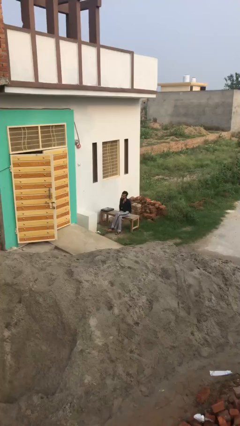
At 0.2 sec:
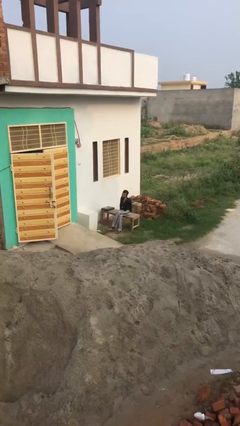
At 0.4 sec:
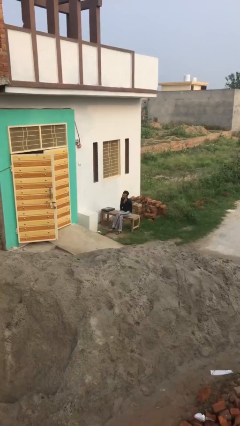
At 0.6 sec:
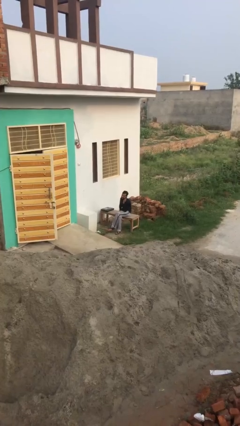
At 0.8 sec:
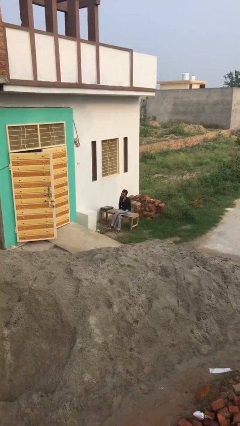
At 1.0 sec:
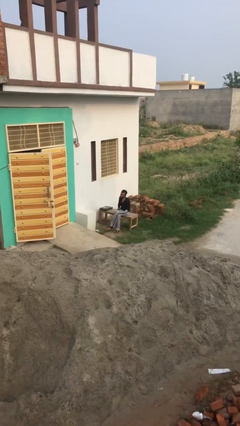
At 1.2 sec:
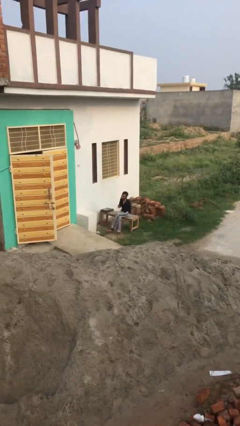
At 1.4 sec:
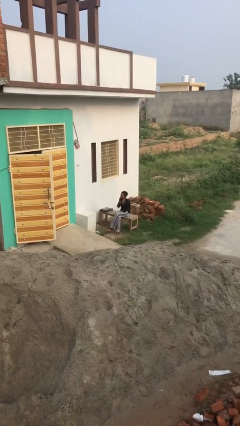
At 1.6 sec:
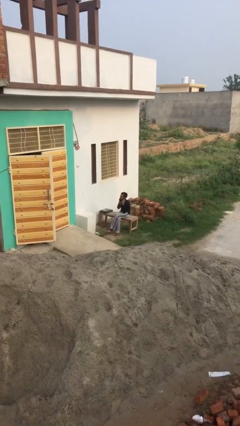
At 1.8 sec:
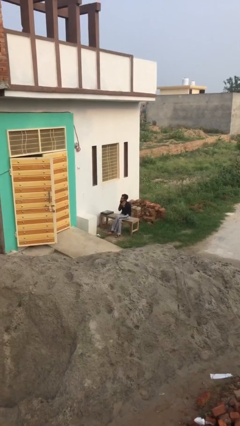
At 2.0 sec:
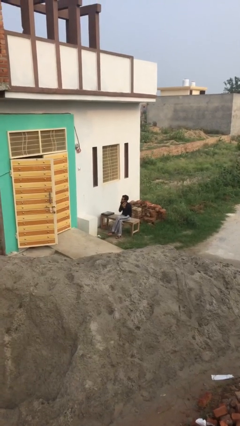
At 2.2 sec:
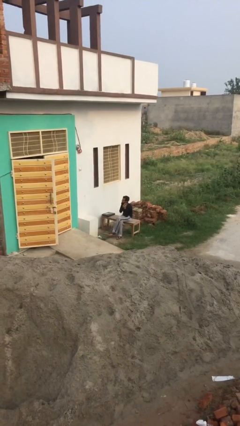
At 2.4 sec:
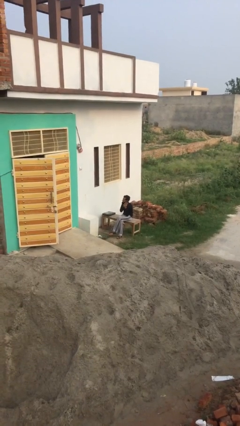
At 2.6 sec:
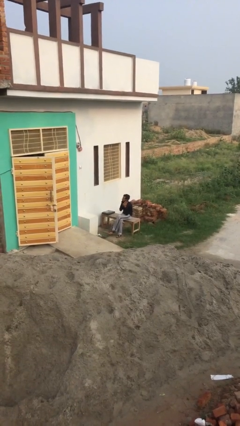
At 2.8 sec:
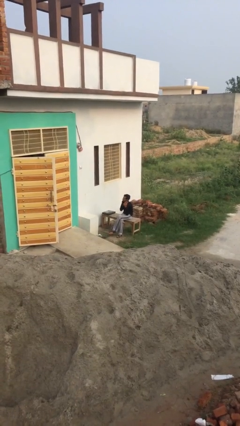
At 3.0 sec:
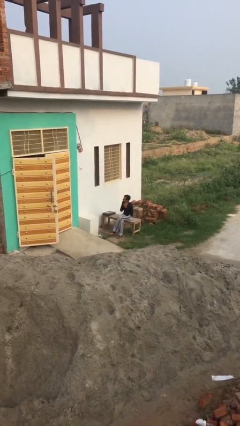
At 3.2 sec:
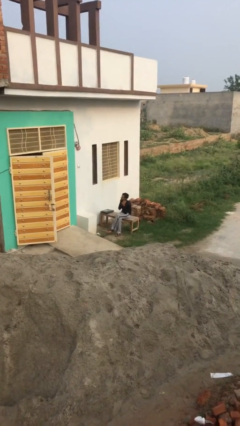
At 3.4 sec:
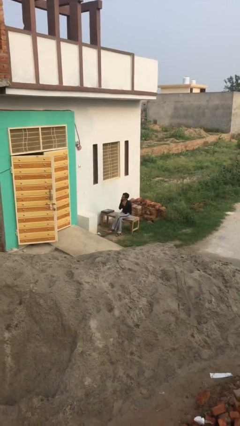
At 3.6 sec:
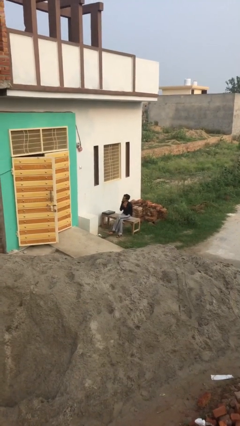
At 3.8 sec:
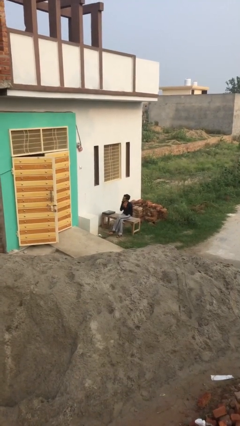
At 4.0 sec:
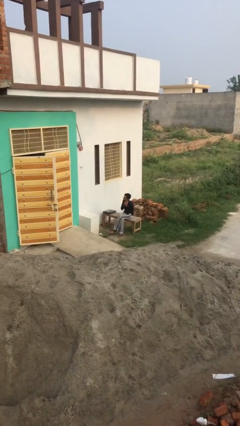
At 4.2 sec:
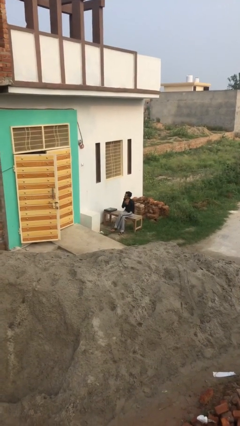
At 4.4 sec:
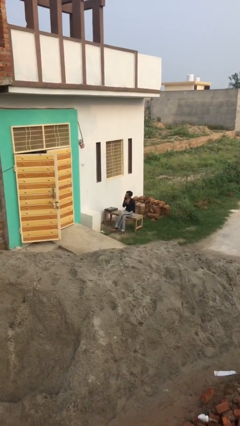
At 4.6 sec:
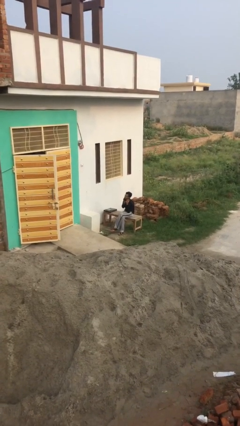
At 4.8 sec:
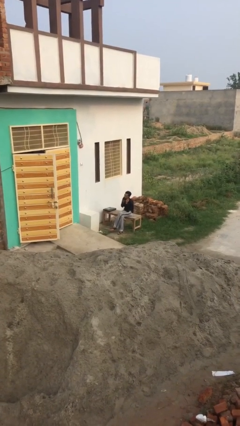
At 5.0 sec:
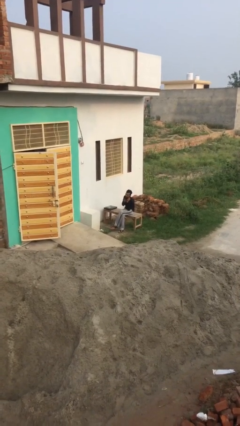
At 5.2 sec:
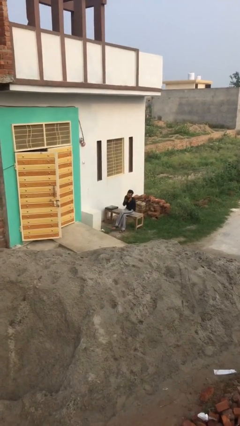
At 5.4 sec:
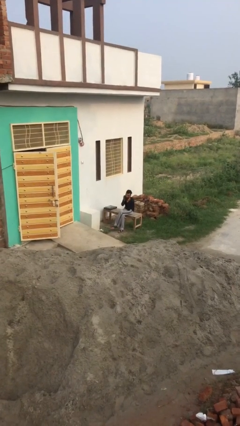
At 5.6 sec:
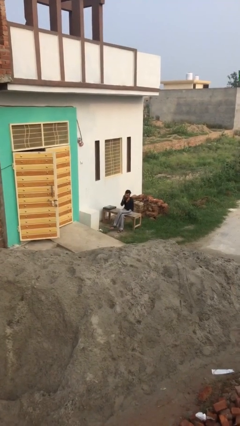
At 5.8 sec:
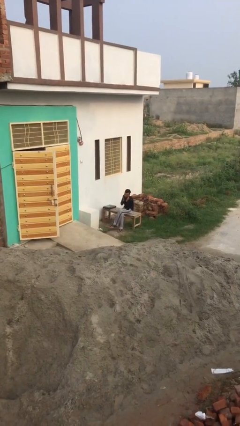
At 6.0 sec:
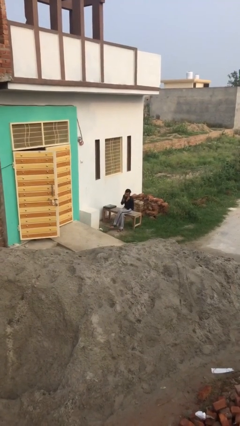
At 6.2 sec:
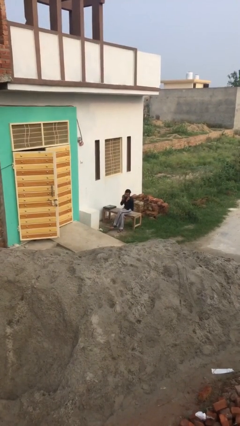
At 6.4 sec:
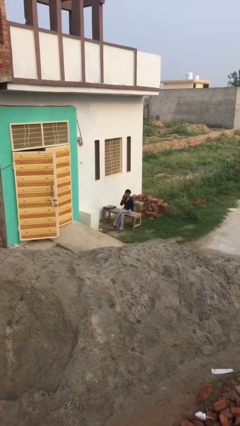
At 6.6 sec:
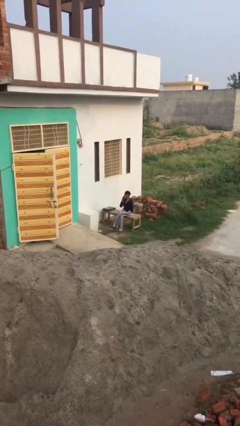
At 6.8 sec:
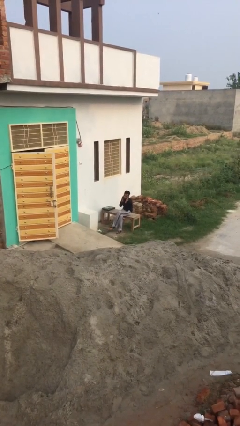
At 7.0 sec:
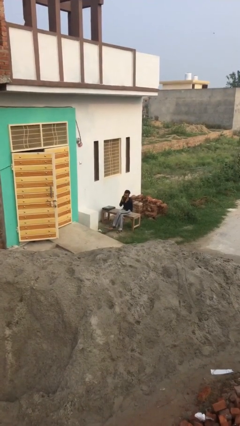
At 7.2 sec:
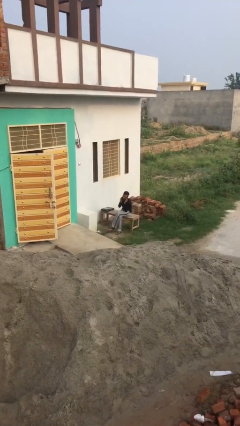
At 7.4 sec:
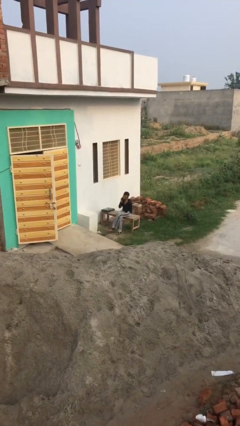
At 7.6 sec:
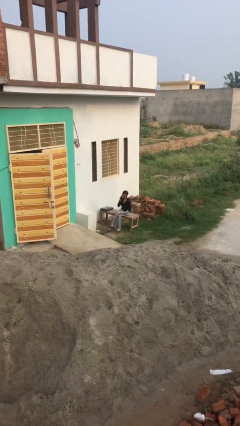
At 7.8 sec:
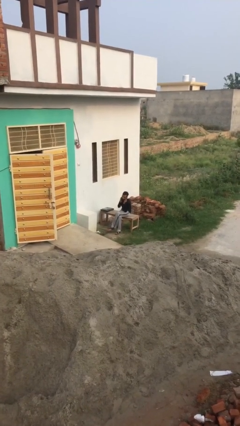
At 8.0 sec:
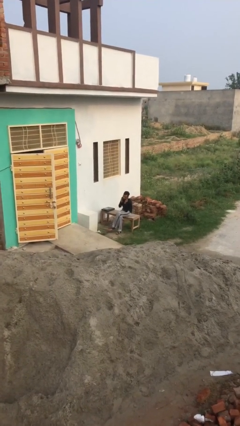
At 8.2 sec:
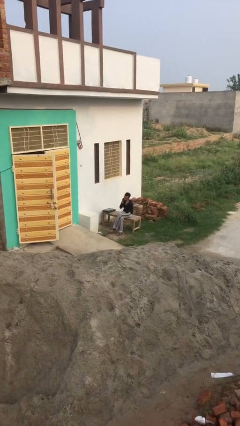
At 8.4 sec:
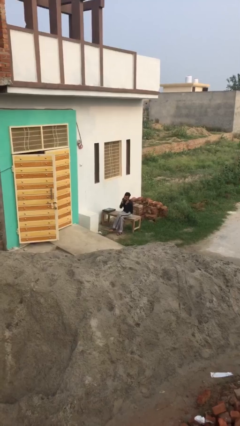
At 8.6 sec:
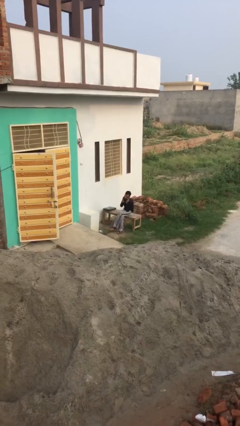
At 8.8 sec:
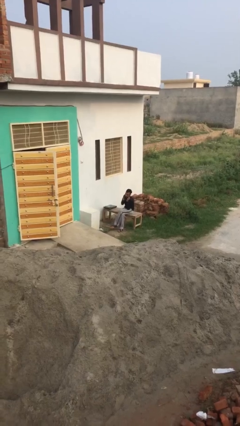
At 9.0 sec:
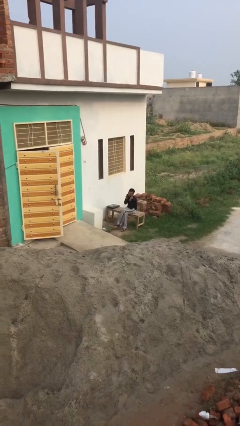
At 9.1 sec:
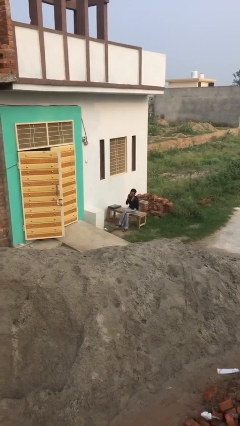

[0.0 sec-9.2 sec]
person talks on phone

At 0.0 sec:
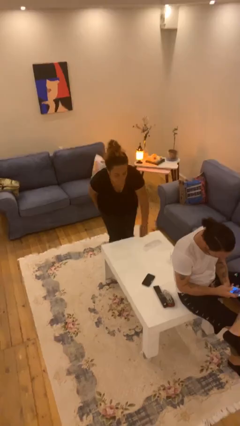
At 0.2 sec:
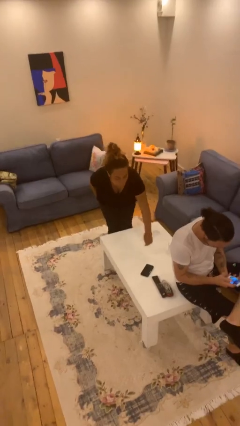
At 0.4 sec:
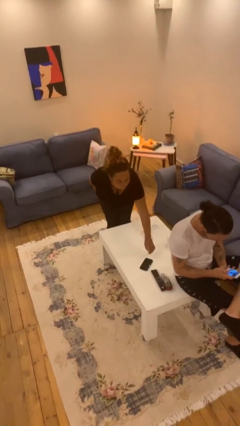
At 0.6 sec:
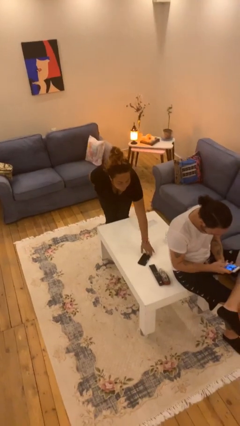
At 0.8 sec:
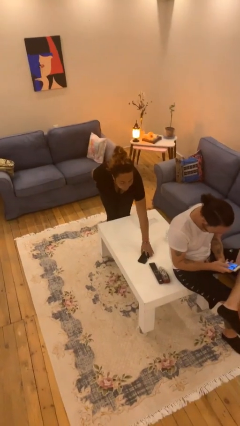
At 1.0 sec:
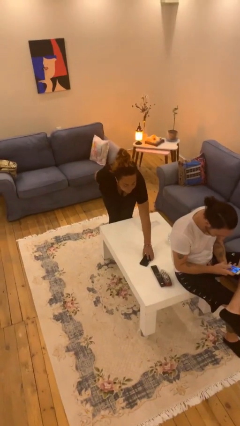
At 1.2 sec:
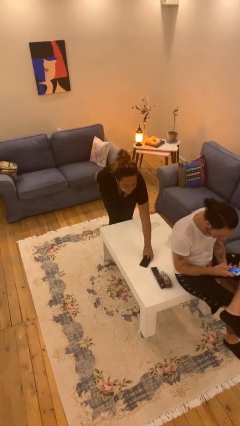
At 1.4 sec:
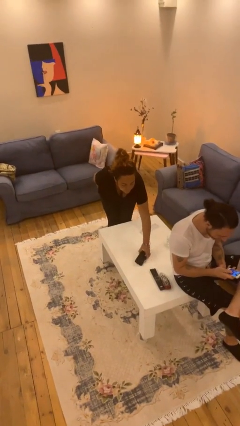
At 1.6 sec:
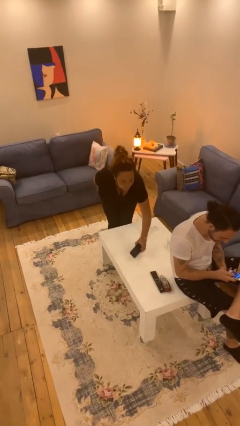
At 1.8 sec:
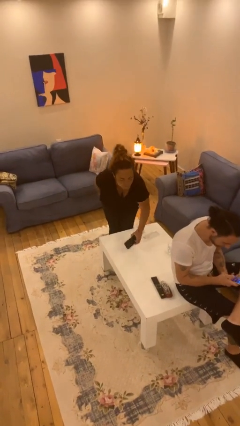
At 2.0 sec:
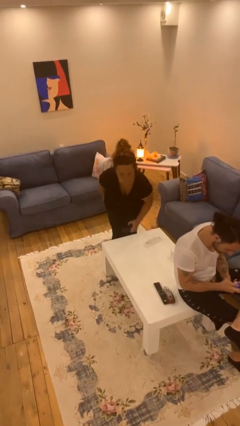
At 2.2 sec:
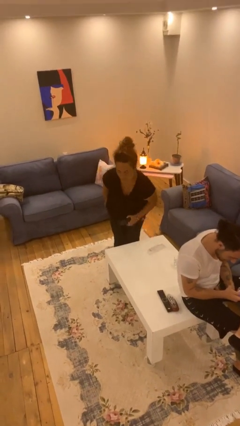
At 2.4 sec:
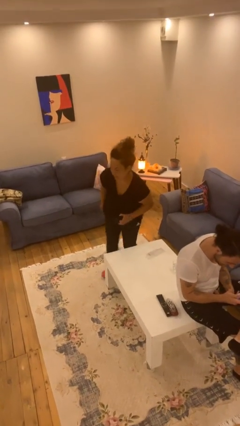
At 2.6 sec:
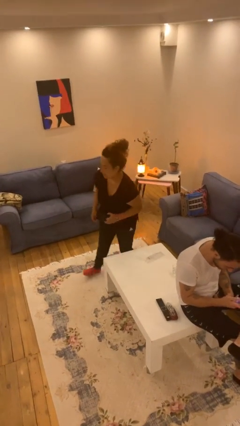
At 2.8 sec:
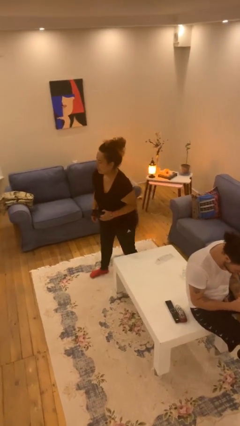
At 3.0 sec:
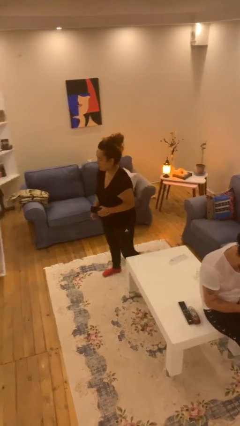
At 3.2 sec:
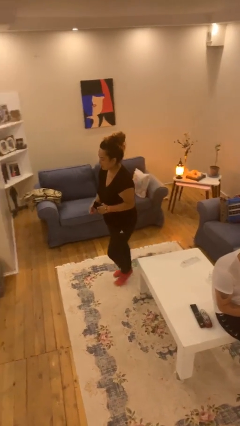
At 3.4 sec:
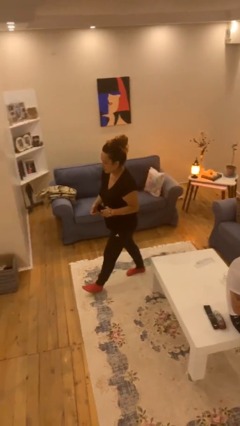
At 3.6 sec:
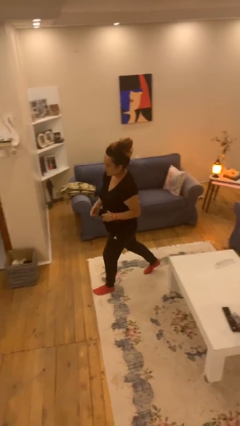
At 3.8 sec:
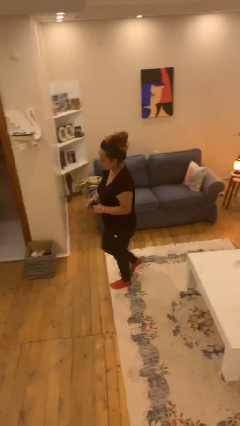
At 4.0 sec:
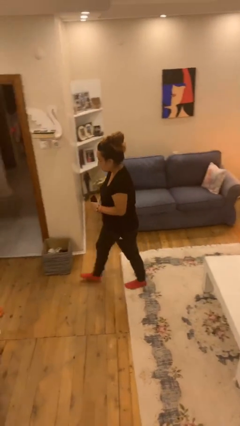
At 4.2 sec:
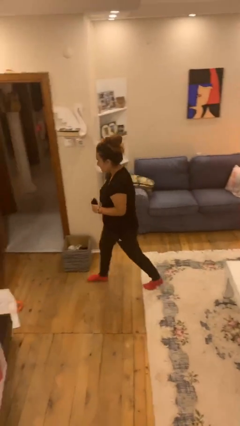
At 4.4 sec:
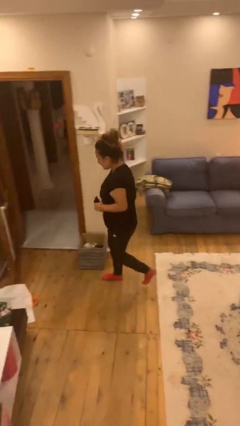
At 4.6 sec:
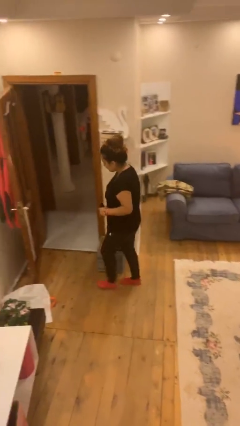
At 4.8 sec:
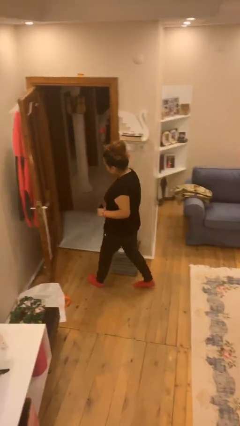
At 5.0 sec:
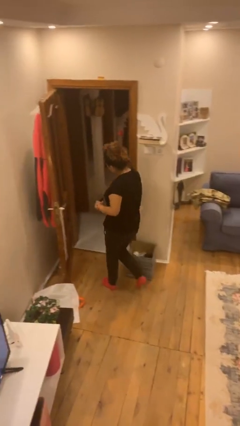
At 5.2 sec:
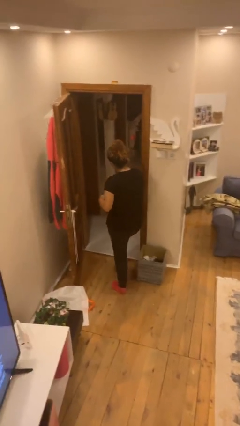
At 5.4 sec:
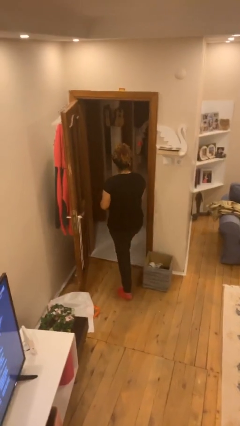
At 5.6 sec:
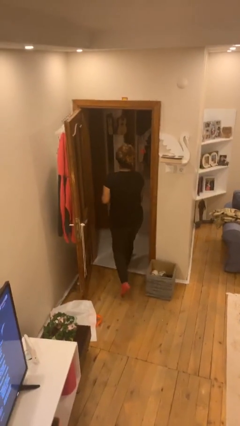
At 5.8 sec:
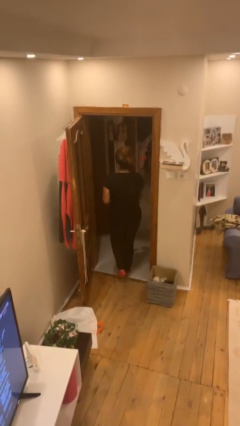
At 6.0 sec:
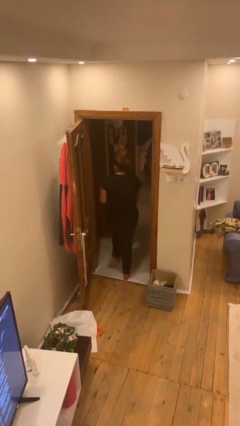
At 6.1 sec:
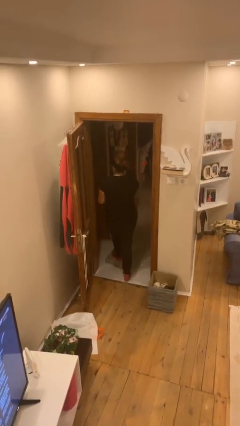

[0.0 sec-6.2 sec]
person steals object from person

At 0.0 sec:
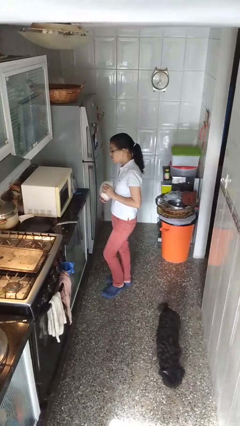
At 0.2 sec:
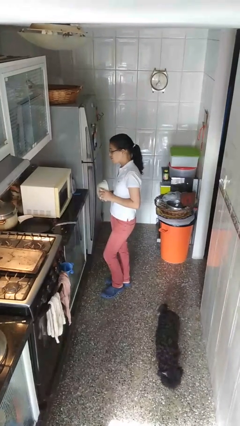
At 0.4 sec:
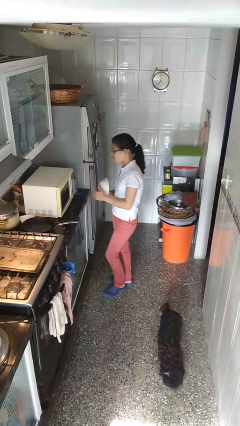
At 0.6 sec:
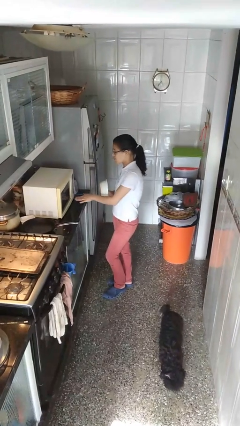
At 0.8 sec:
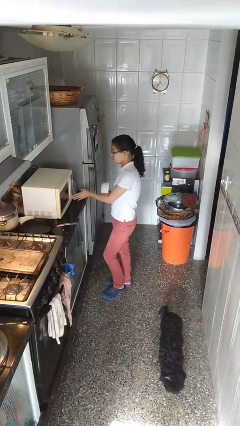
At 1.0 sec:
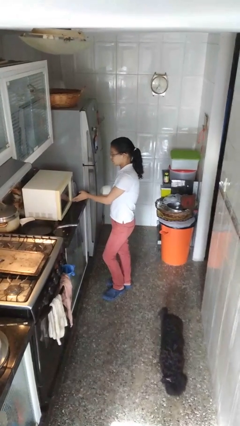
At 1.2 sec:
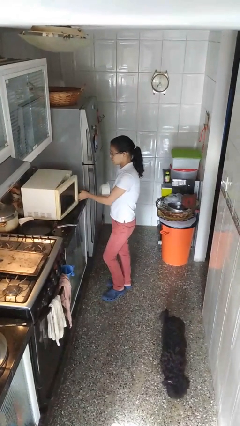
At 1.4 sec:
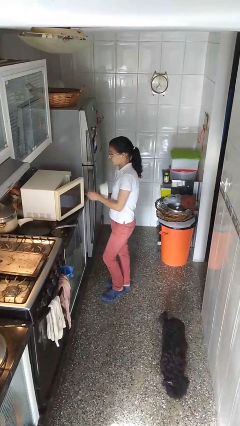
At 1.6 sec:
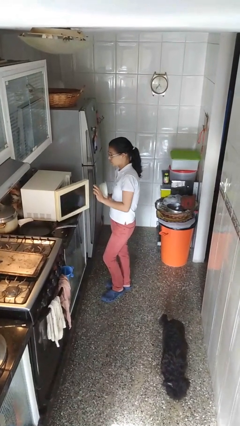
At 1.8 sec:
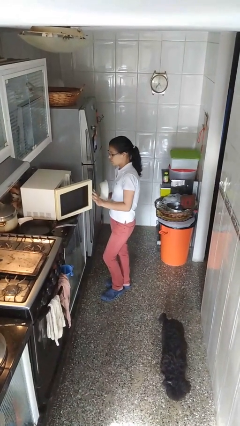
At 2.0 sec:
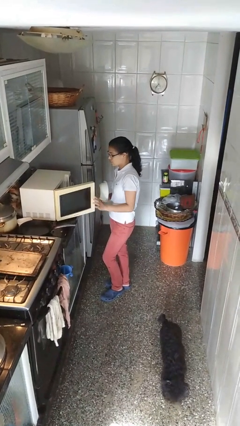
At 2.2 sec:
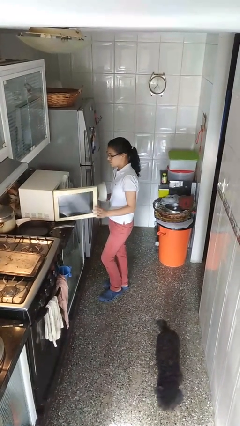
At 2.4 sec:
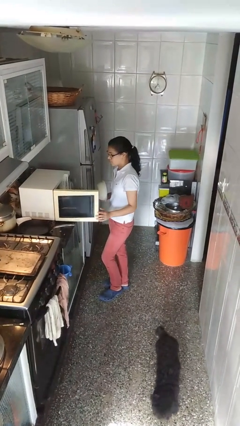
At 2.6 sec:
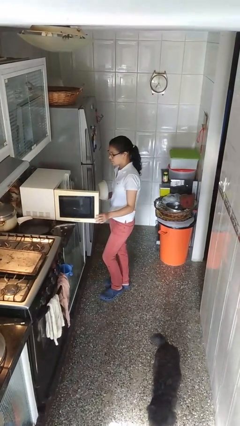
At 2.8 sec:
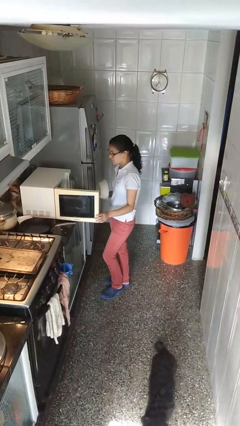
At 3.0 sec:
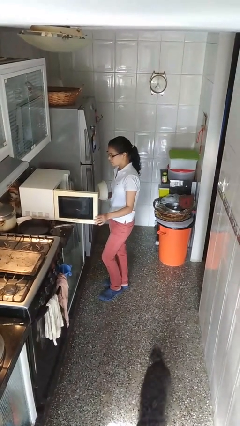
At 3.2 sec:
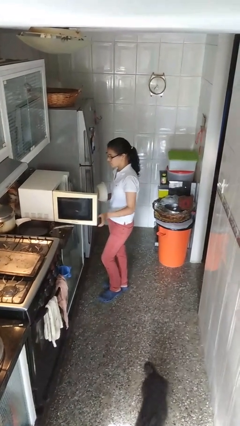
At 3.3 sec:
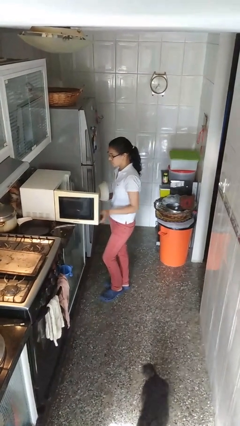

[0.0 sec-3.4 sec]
person opens microwave
